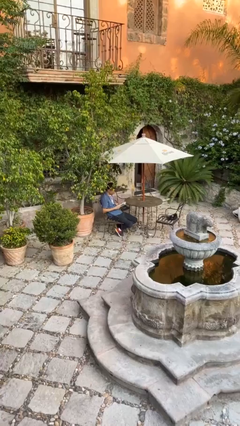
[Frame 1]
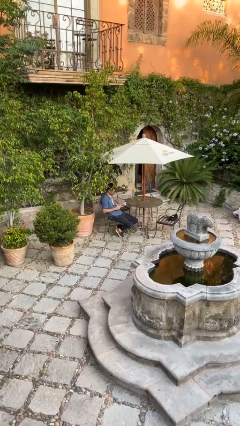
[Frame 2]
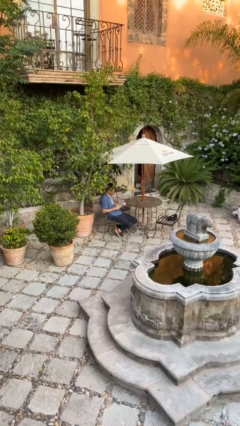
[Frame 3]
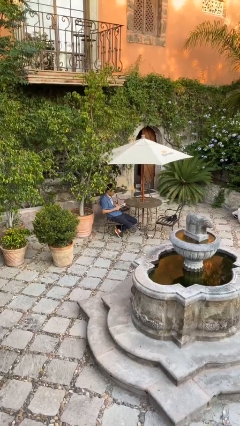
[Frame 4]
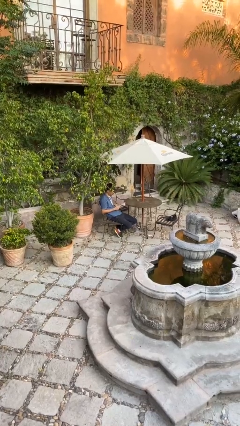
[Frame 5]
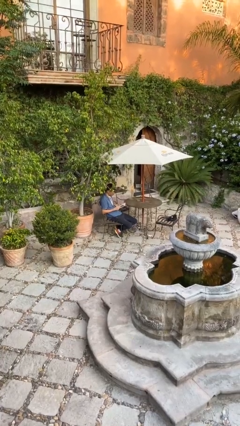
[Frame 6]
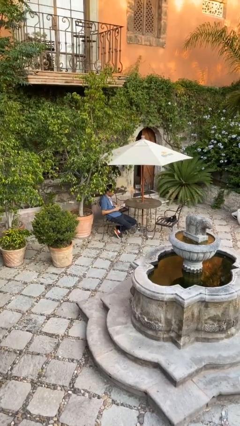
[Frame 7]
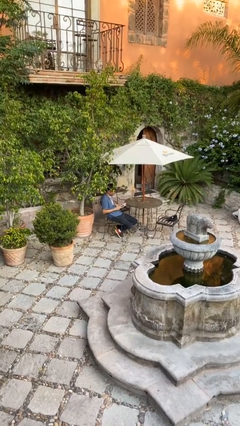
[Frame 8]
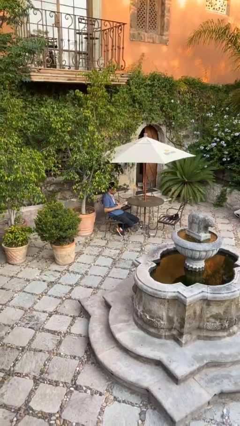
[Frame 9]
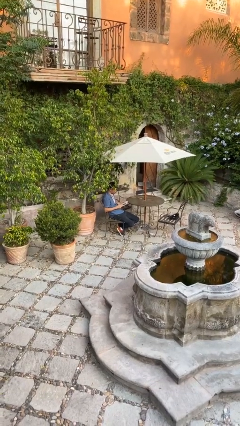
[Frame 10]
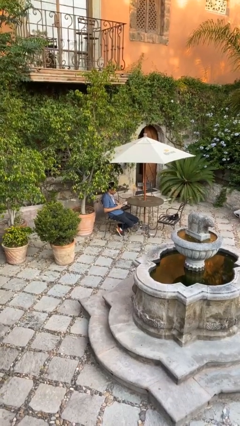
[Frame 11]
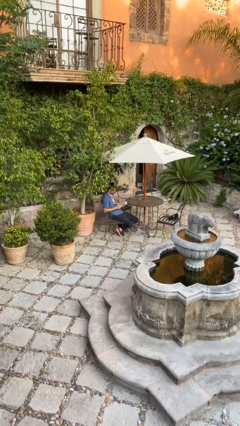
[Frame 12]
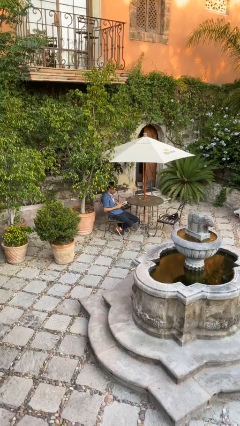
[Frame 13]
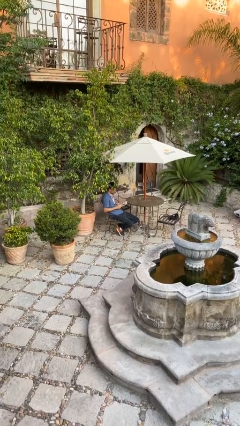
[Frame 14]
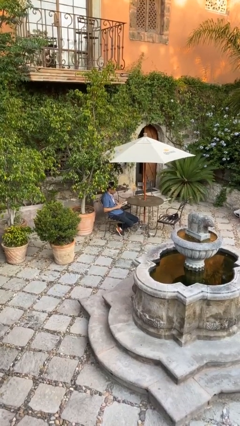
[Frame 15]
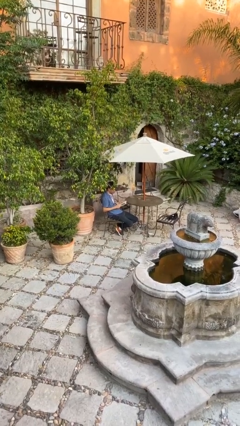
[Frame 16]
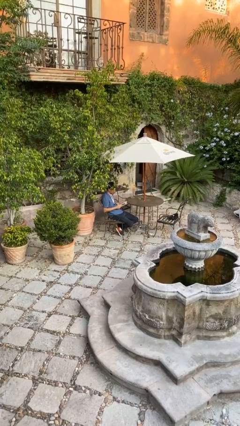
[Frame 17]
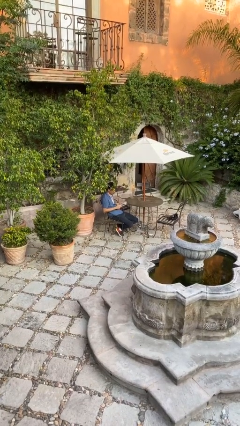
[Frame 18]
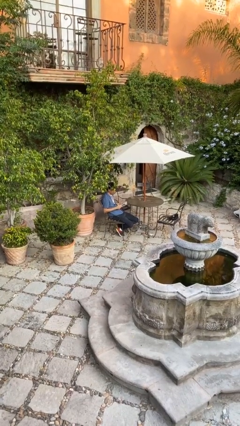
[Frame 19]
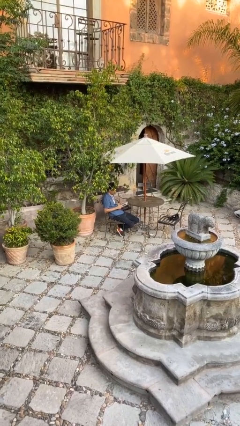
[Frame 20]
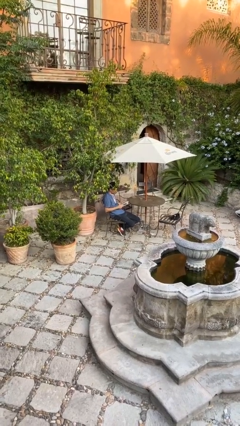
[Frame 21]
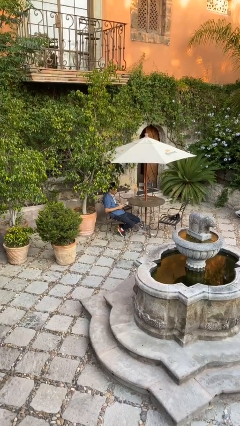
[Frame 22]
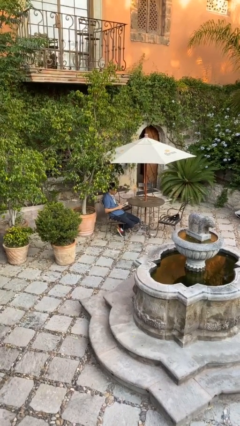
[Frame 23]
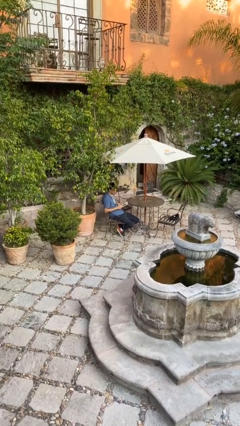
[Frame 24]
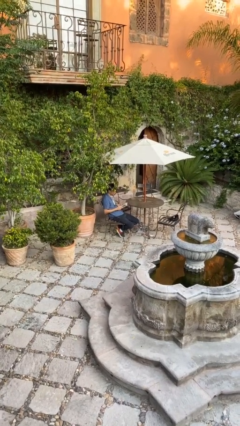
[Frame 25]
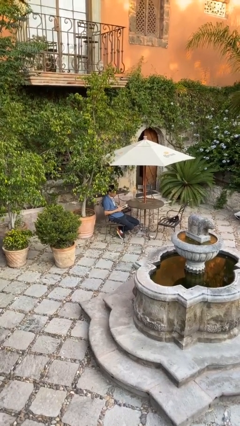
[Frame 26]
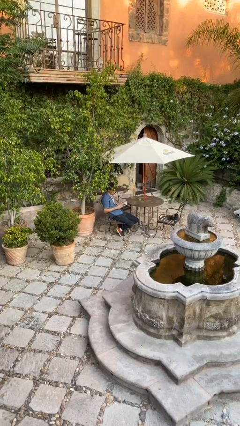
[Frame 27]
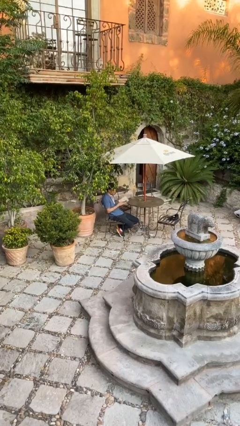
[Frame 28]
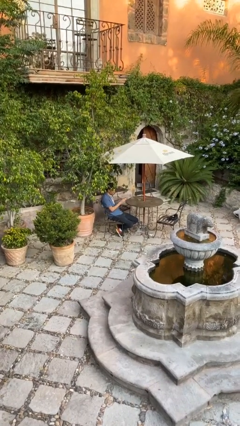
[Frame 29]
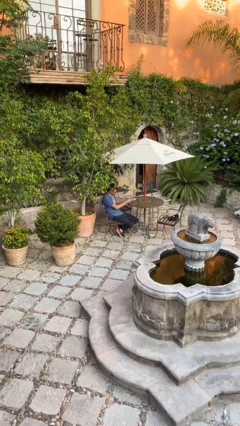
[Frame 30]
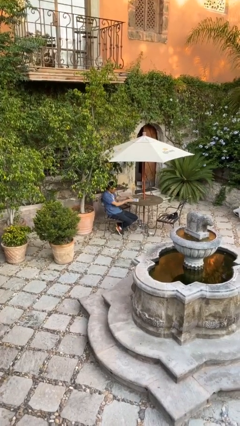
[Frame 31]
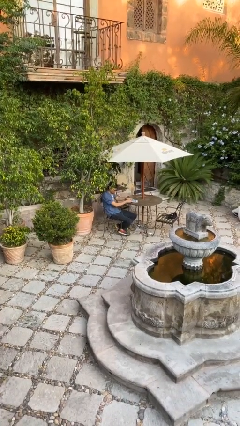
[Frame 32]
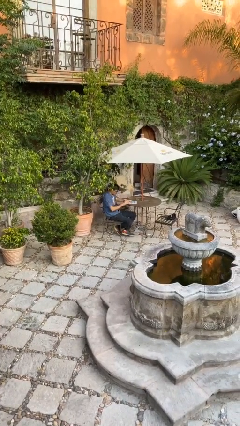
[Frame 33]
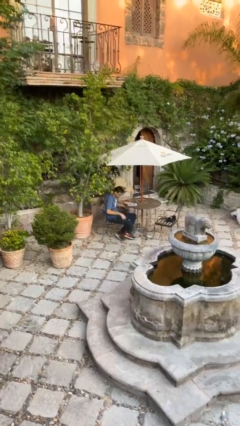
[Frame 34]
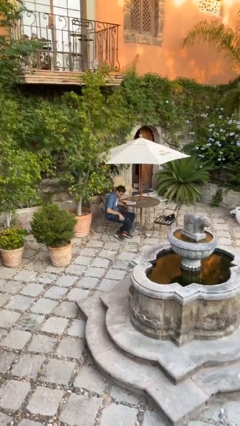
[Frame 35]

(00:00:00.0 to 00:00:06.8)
person reads document

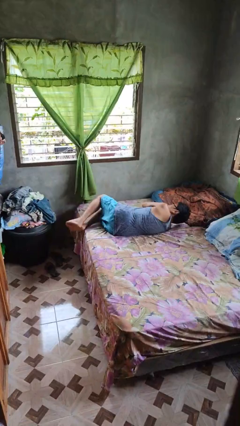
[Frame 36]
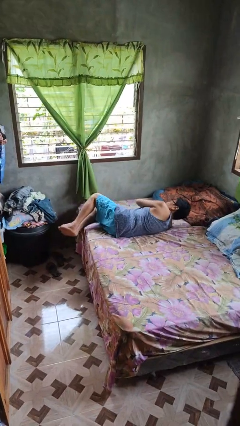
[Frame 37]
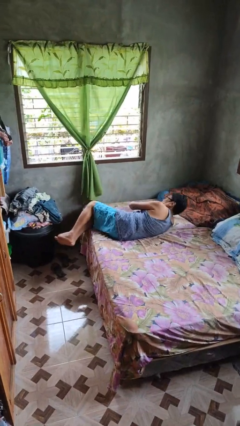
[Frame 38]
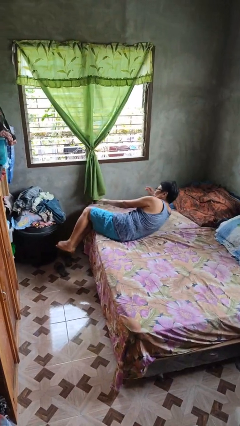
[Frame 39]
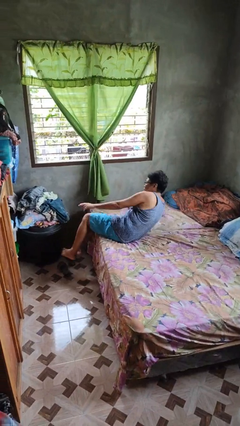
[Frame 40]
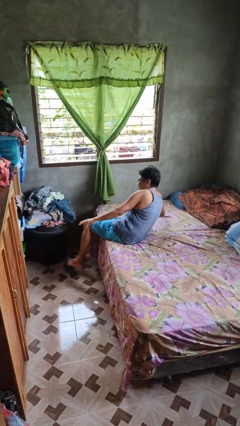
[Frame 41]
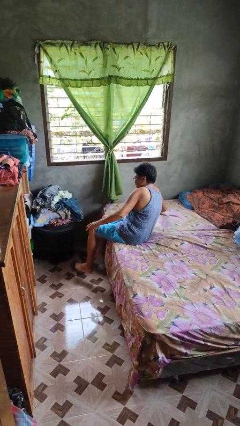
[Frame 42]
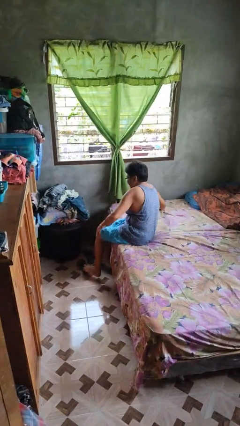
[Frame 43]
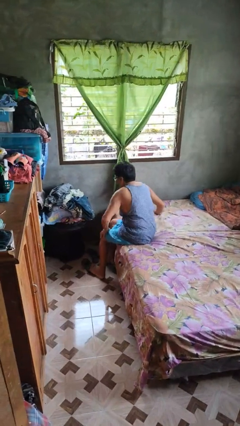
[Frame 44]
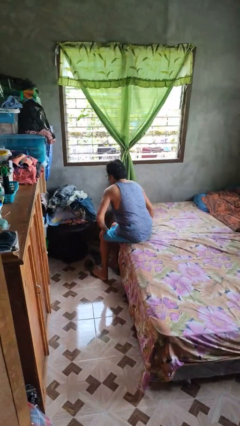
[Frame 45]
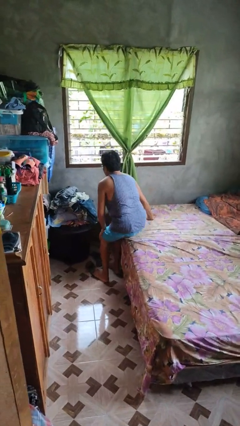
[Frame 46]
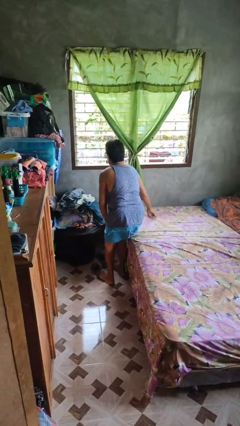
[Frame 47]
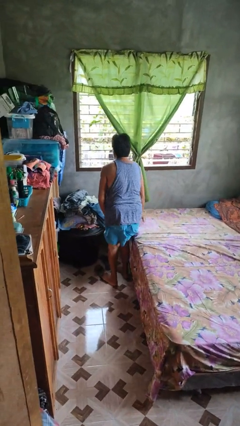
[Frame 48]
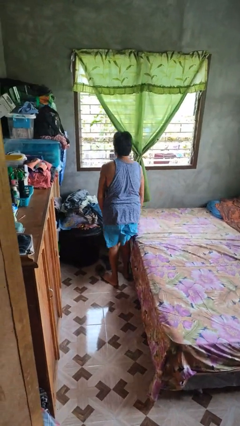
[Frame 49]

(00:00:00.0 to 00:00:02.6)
person stands up

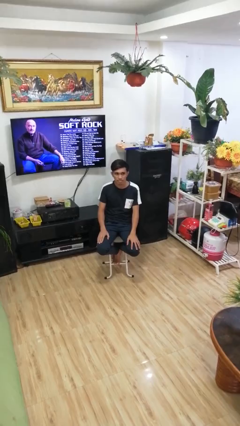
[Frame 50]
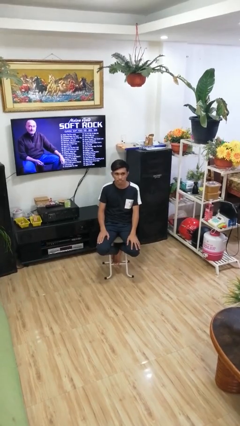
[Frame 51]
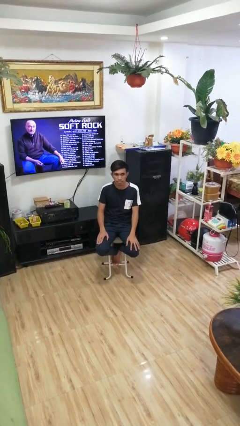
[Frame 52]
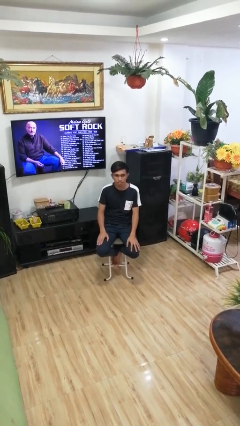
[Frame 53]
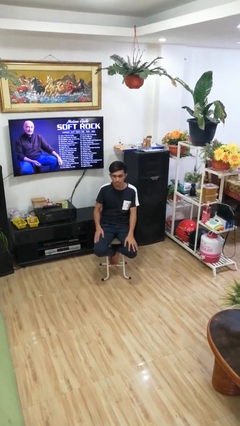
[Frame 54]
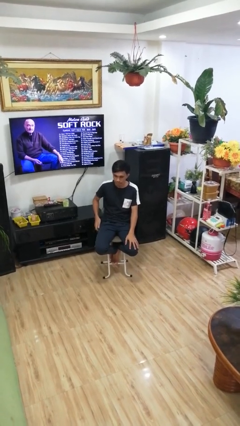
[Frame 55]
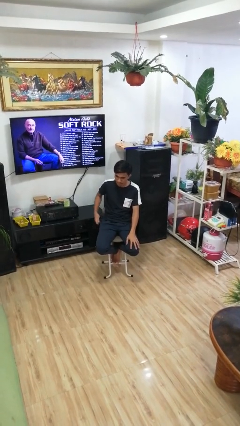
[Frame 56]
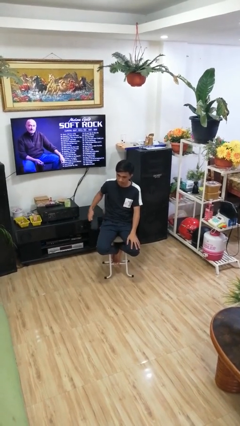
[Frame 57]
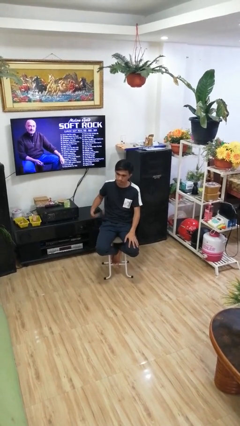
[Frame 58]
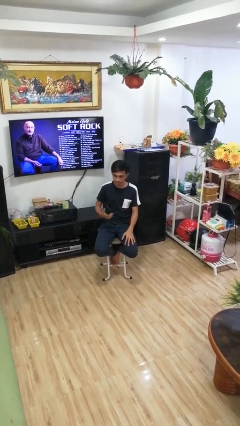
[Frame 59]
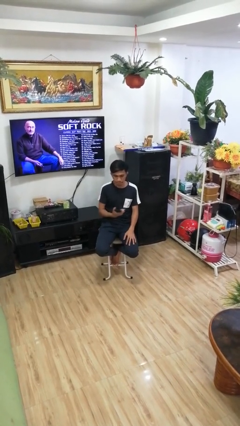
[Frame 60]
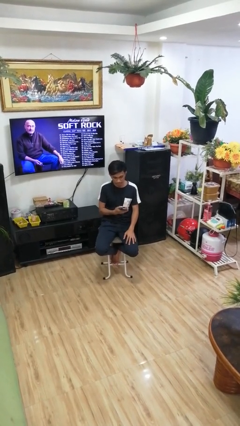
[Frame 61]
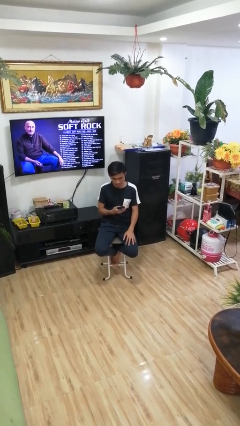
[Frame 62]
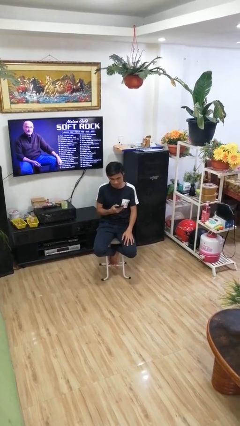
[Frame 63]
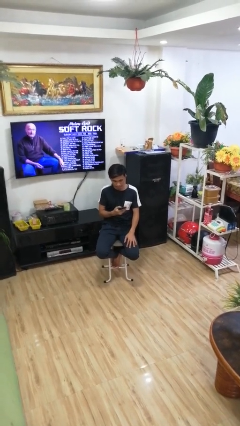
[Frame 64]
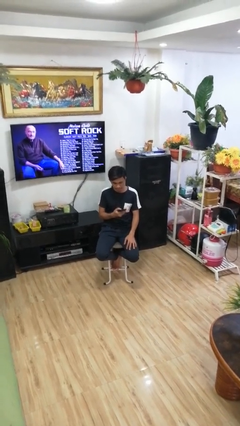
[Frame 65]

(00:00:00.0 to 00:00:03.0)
person takes phone from pocket

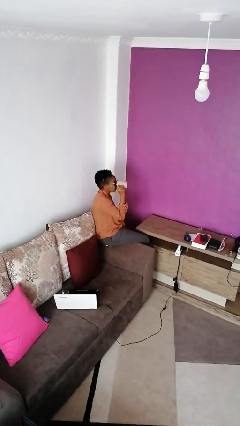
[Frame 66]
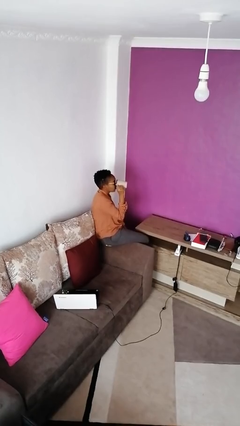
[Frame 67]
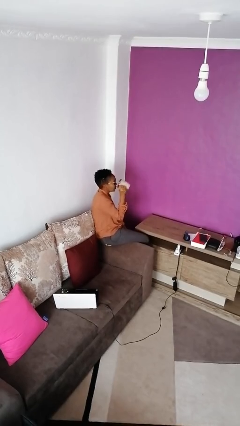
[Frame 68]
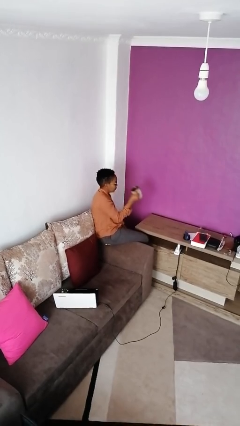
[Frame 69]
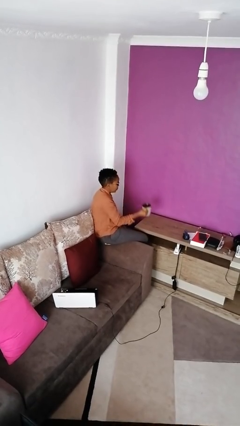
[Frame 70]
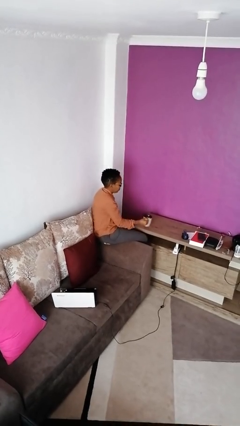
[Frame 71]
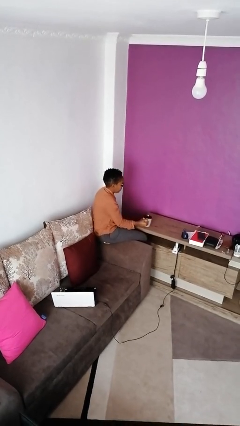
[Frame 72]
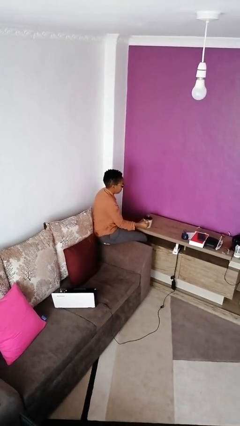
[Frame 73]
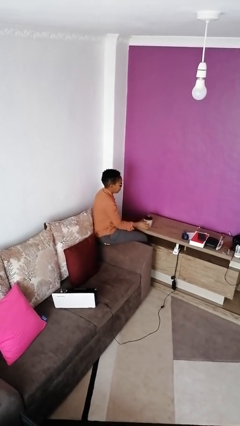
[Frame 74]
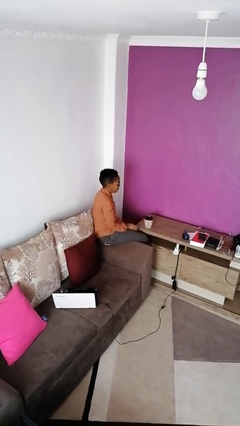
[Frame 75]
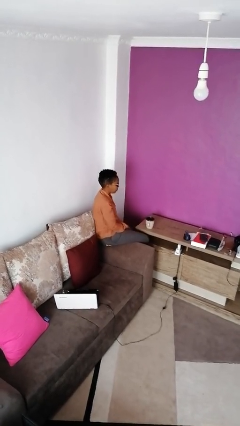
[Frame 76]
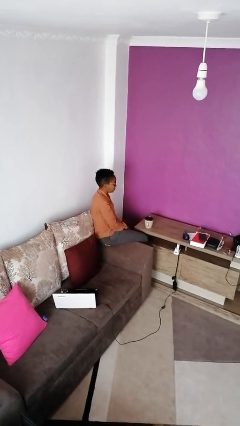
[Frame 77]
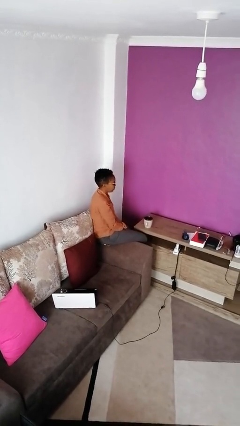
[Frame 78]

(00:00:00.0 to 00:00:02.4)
person puts down object on table

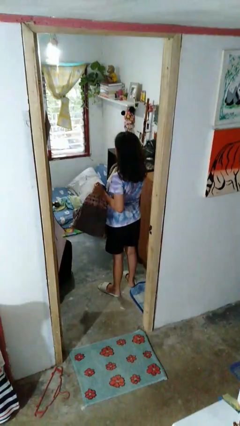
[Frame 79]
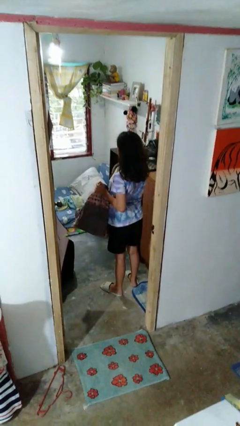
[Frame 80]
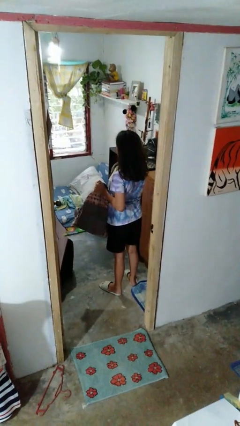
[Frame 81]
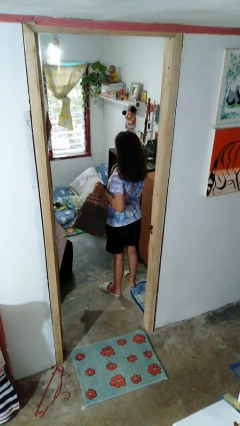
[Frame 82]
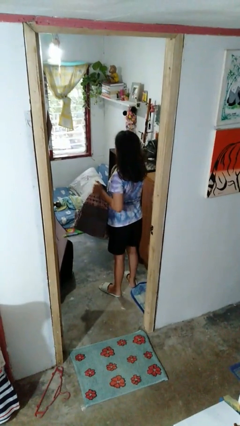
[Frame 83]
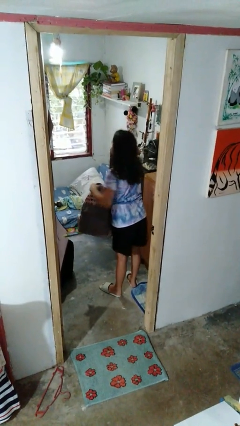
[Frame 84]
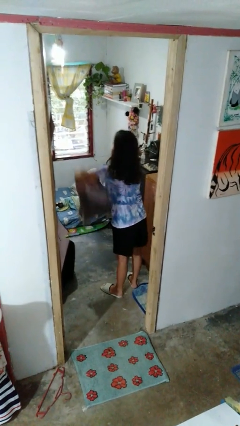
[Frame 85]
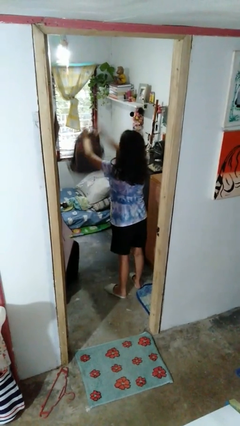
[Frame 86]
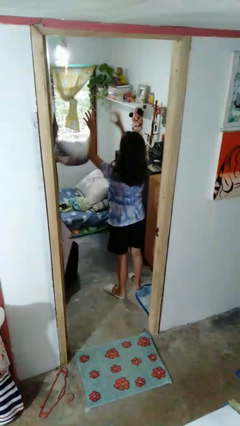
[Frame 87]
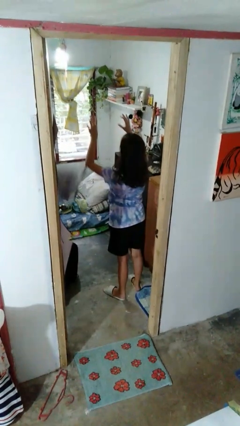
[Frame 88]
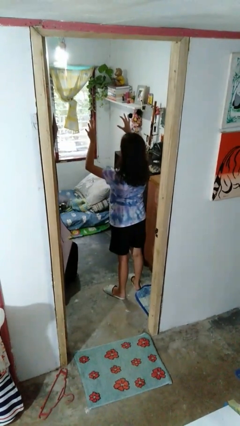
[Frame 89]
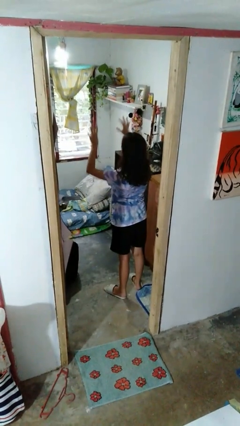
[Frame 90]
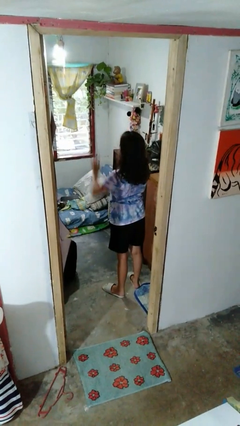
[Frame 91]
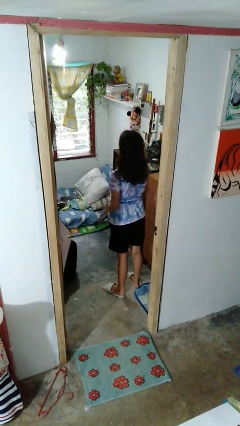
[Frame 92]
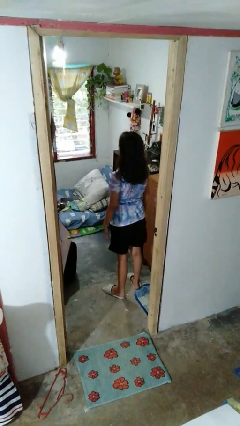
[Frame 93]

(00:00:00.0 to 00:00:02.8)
person throws object on bed

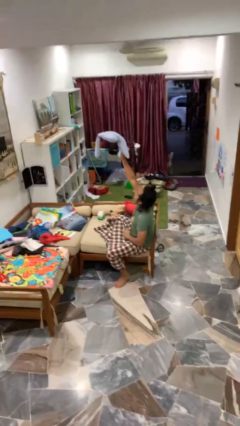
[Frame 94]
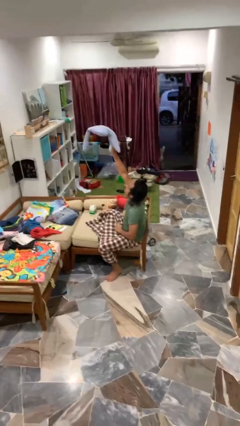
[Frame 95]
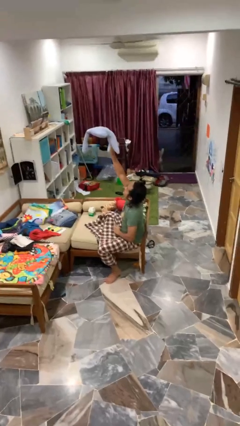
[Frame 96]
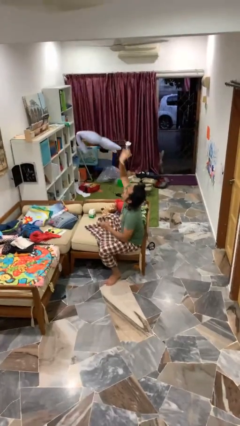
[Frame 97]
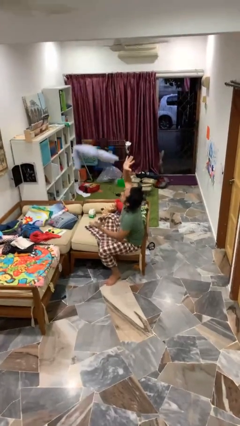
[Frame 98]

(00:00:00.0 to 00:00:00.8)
person drops object
